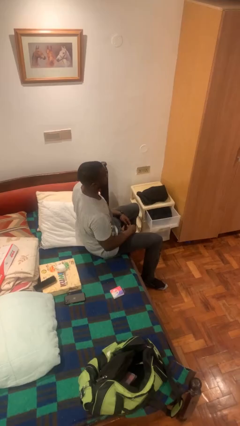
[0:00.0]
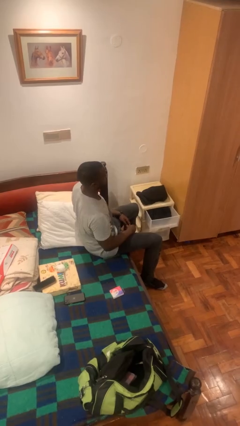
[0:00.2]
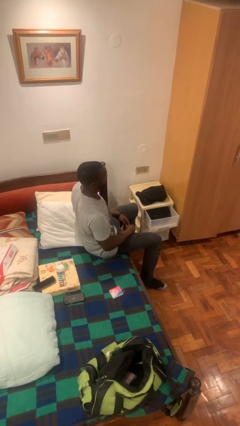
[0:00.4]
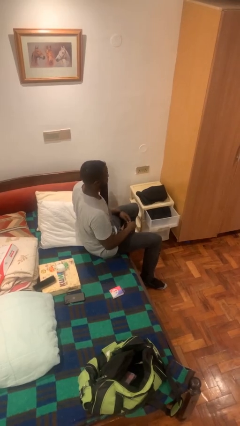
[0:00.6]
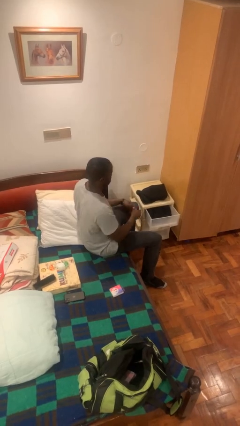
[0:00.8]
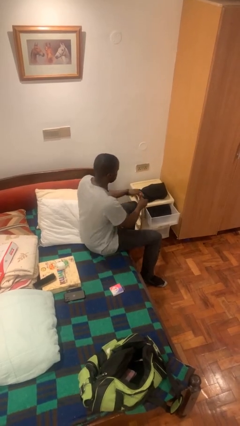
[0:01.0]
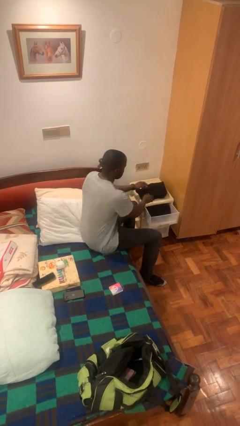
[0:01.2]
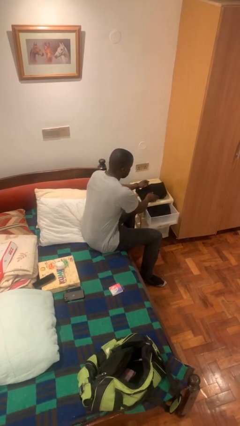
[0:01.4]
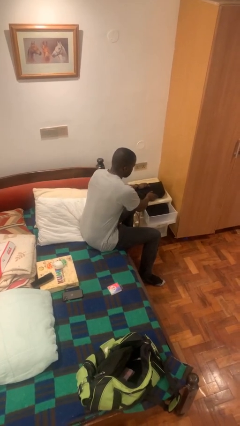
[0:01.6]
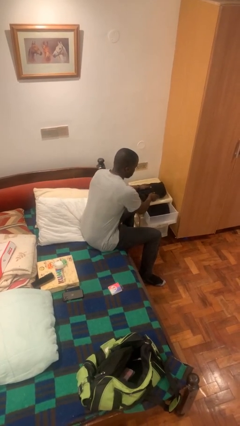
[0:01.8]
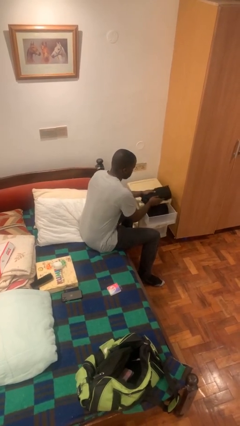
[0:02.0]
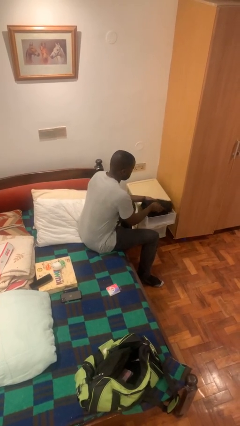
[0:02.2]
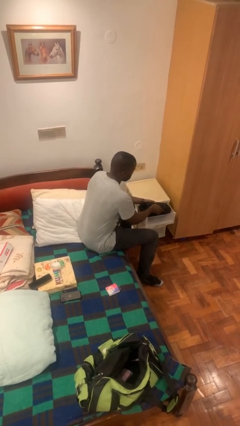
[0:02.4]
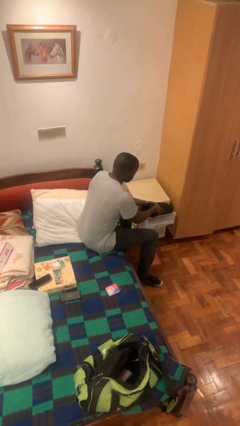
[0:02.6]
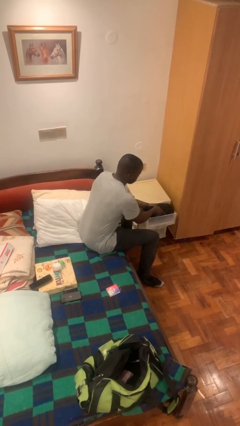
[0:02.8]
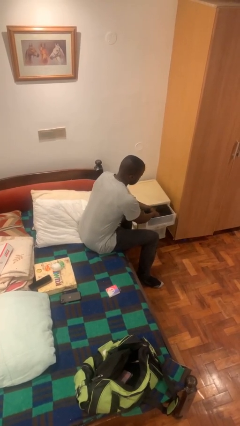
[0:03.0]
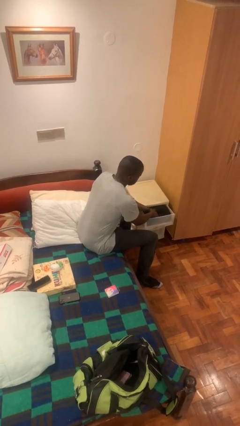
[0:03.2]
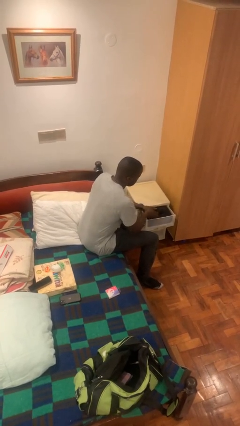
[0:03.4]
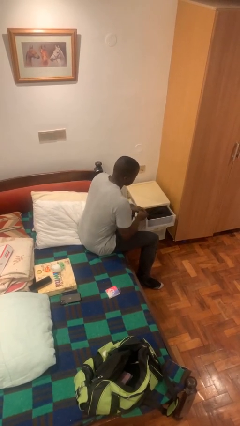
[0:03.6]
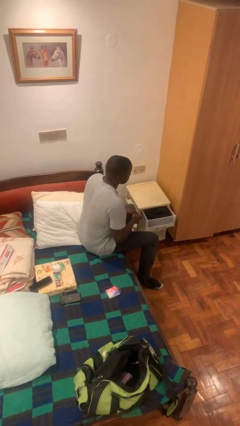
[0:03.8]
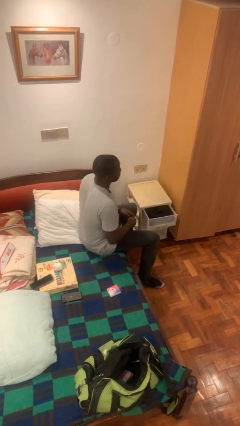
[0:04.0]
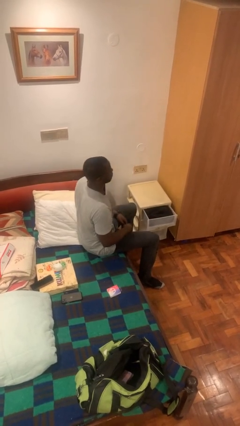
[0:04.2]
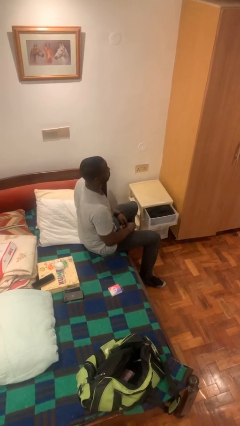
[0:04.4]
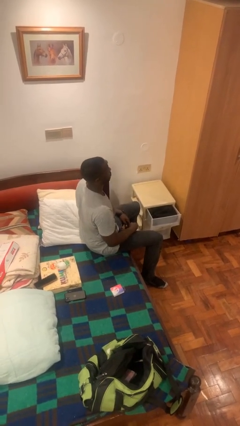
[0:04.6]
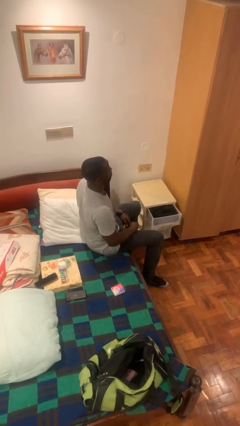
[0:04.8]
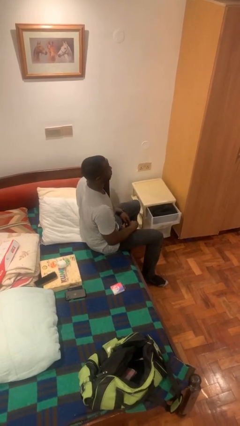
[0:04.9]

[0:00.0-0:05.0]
person puts clothes into dresser

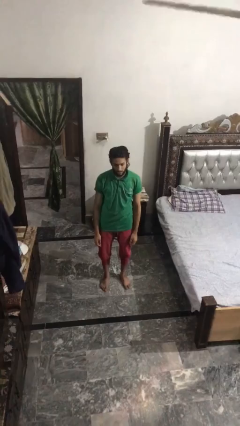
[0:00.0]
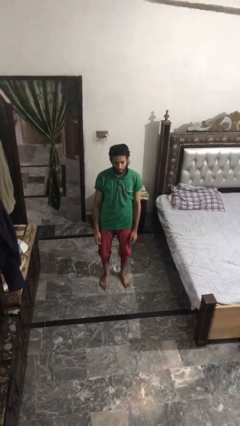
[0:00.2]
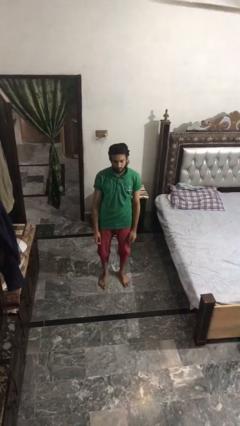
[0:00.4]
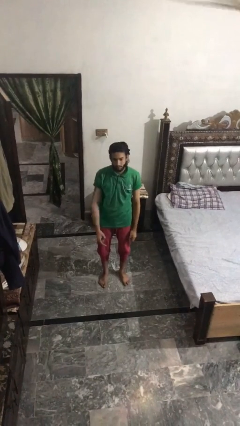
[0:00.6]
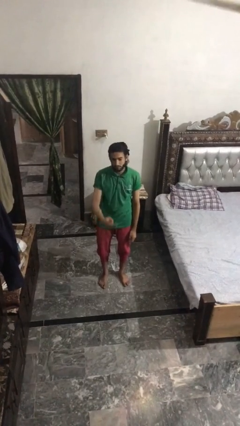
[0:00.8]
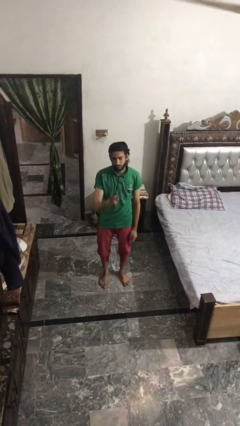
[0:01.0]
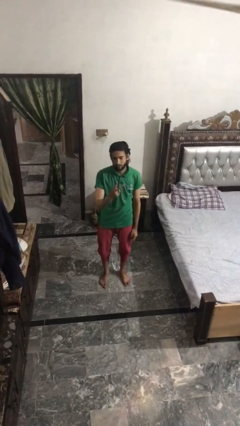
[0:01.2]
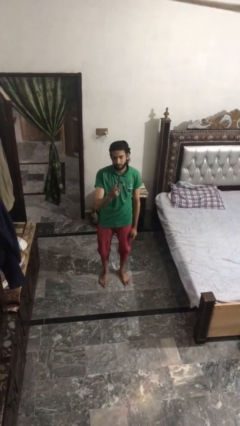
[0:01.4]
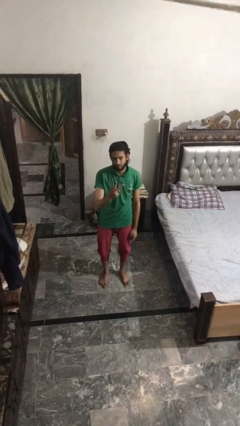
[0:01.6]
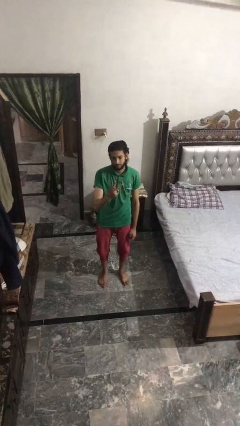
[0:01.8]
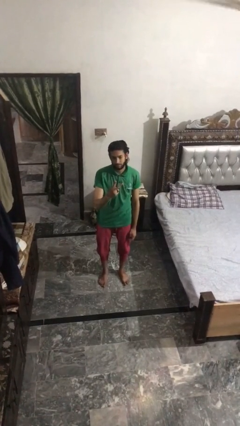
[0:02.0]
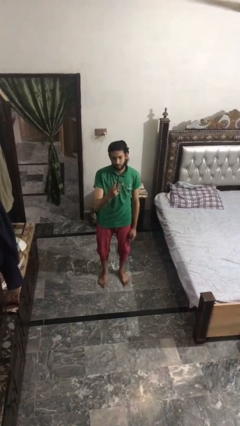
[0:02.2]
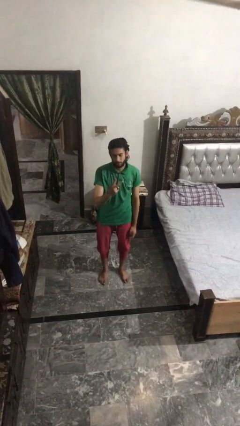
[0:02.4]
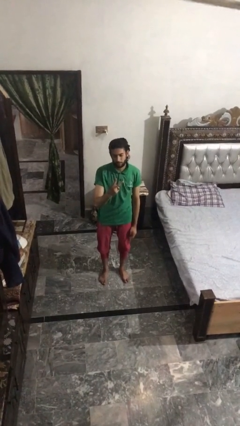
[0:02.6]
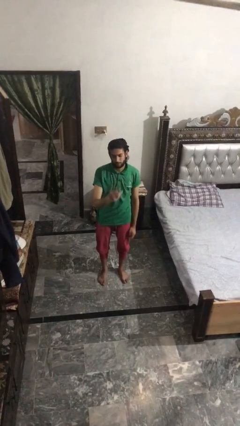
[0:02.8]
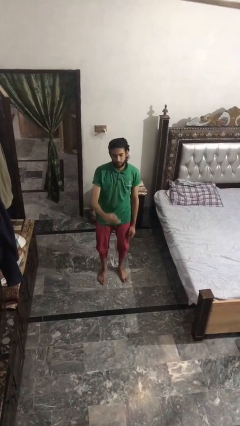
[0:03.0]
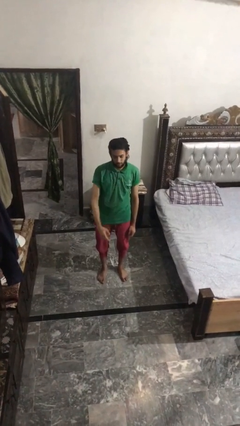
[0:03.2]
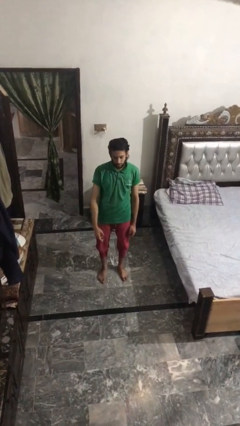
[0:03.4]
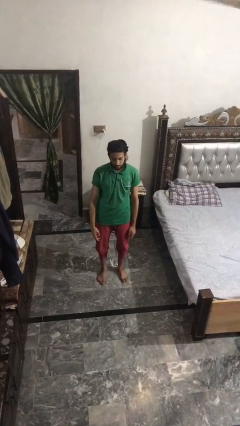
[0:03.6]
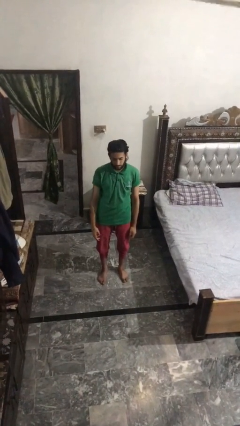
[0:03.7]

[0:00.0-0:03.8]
person gestures peace

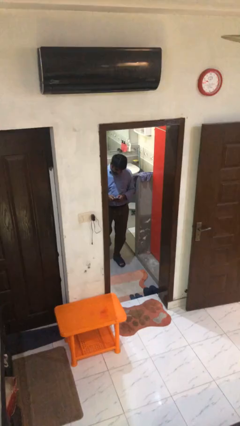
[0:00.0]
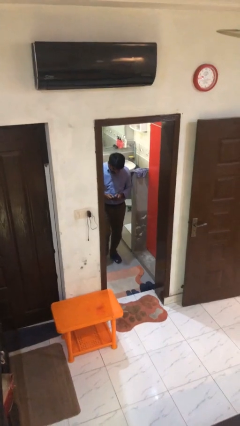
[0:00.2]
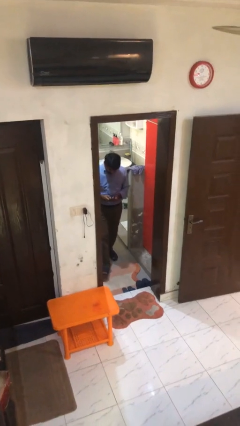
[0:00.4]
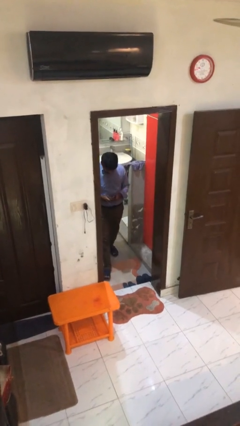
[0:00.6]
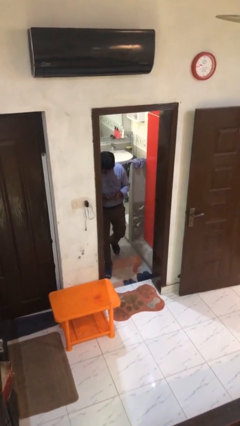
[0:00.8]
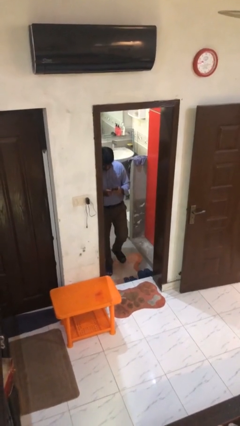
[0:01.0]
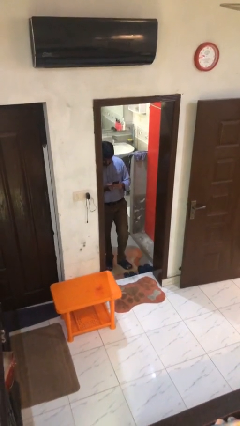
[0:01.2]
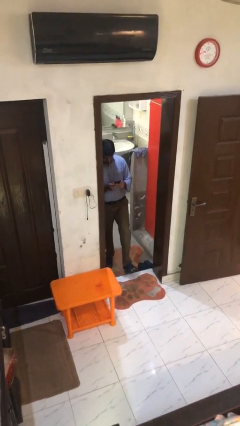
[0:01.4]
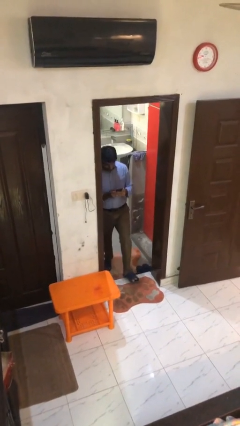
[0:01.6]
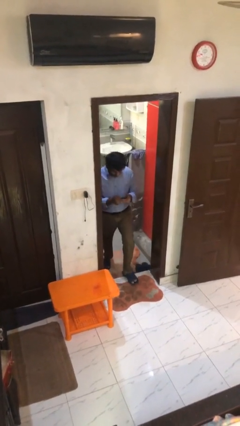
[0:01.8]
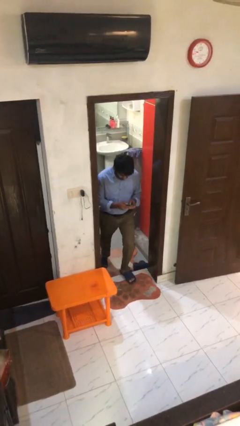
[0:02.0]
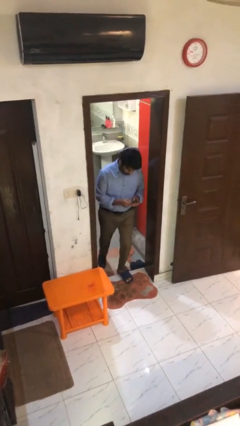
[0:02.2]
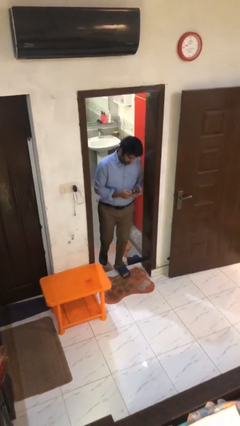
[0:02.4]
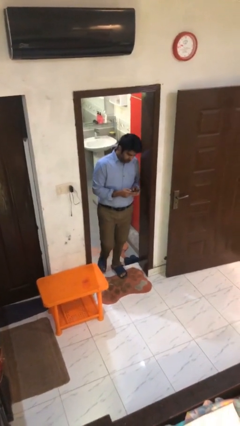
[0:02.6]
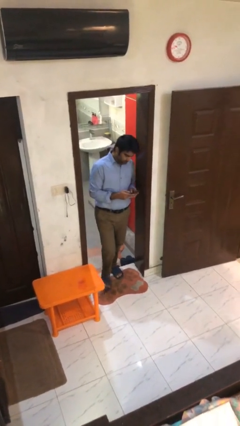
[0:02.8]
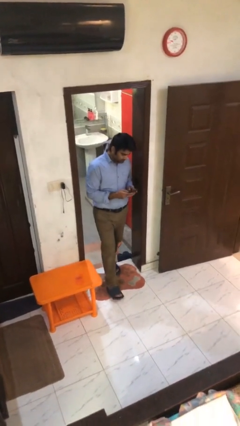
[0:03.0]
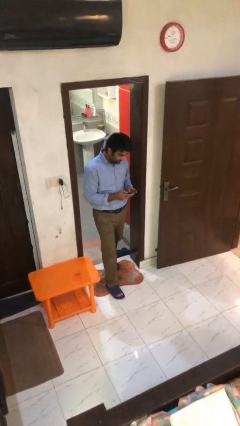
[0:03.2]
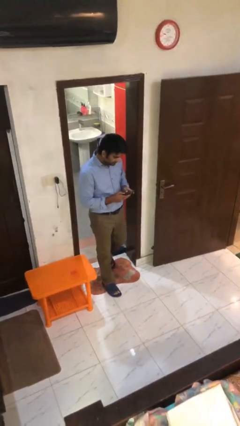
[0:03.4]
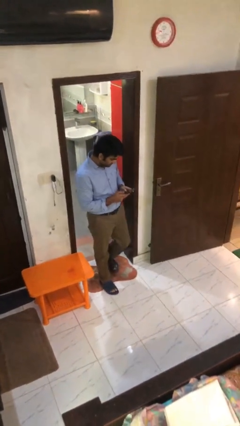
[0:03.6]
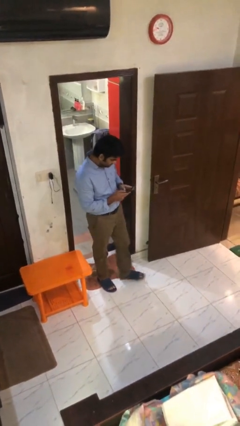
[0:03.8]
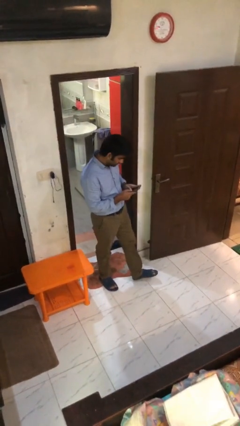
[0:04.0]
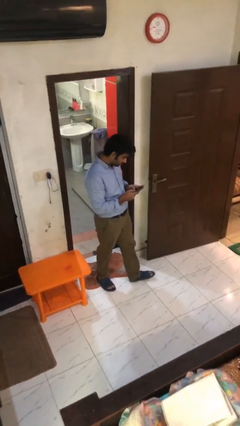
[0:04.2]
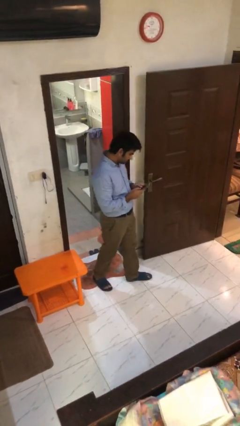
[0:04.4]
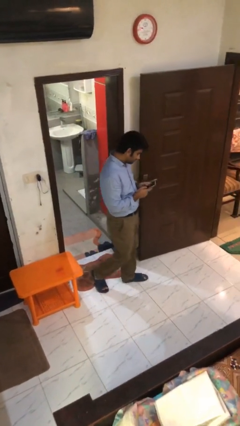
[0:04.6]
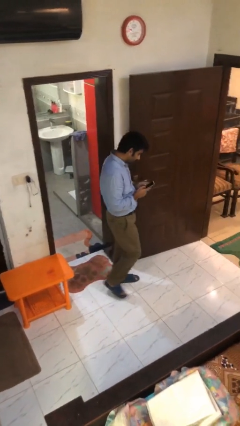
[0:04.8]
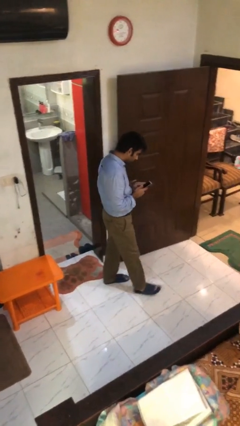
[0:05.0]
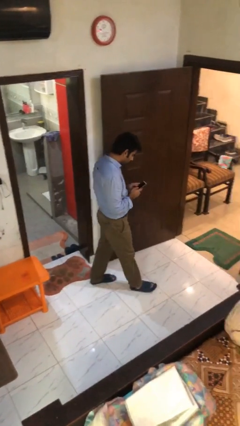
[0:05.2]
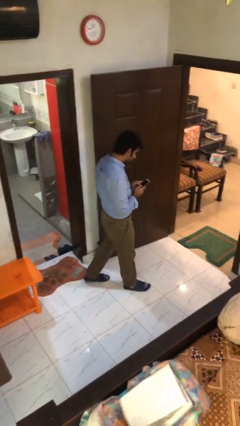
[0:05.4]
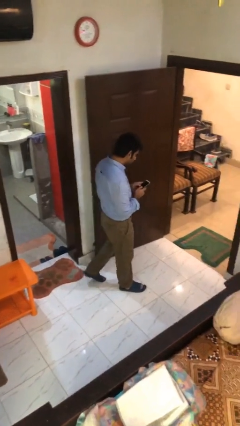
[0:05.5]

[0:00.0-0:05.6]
person enters scene through structure

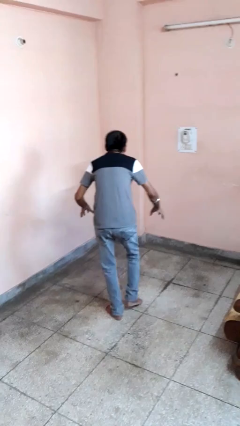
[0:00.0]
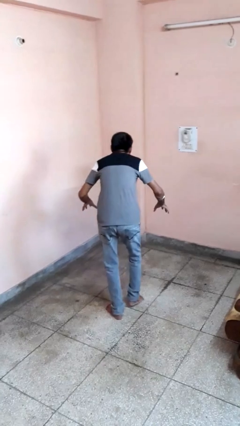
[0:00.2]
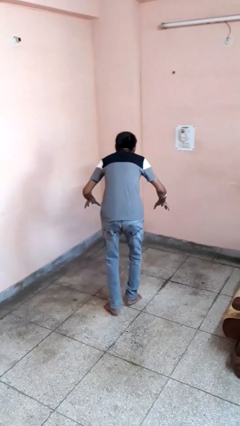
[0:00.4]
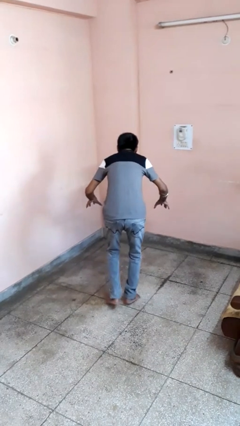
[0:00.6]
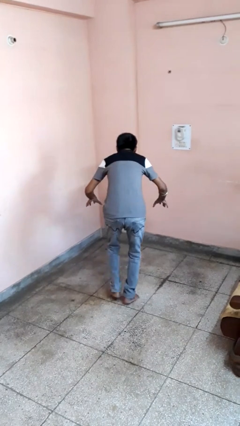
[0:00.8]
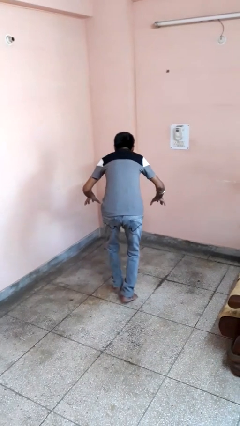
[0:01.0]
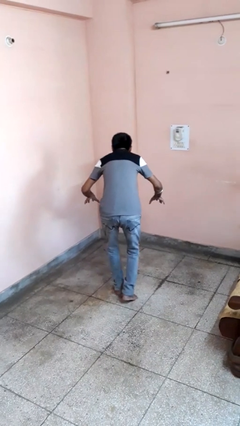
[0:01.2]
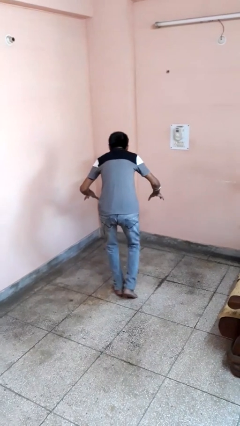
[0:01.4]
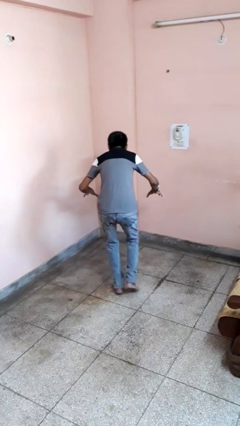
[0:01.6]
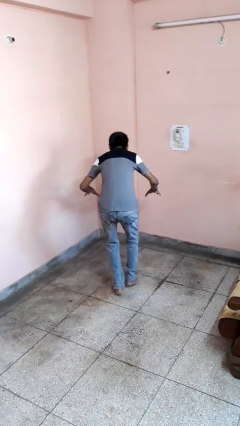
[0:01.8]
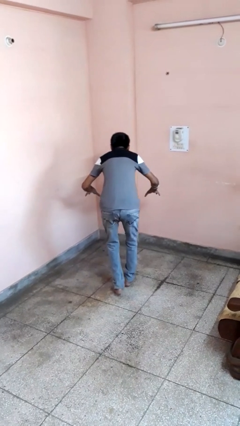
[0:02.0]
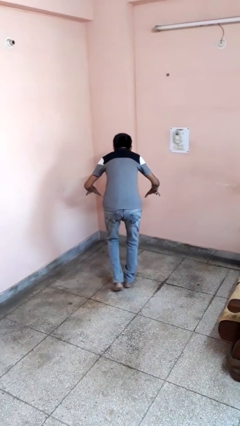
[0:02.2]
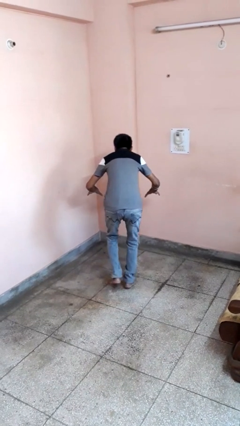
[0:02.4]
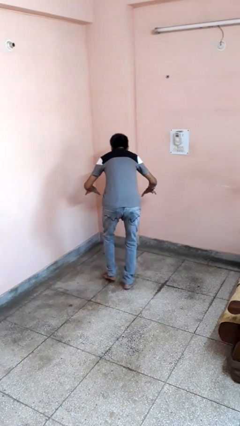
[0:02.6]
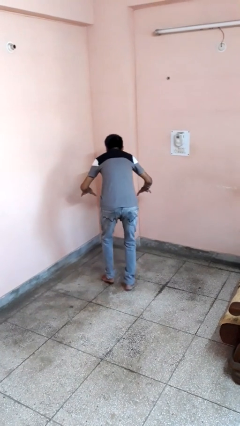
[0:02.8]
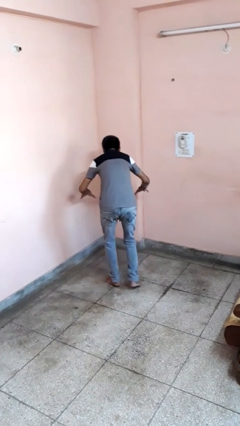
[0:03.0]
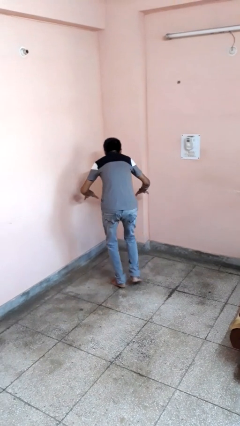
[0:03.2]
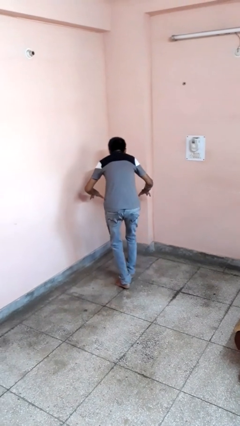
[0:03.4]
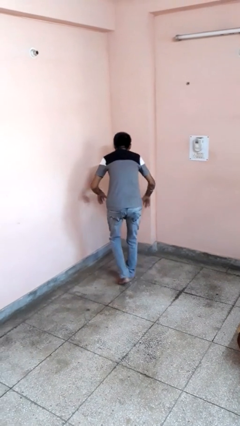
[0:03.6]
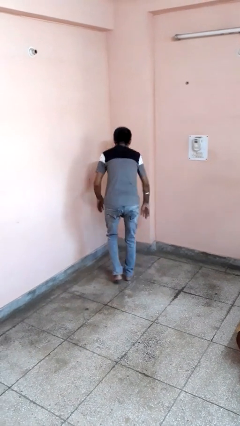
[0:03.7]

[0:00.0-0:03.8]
person walks tiptoe
